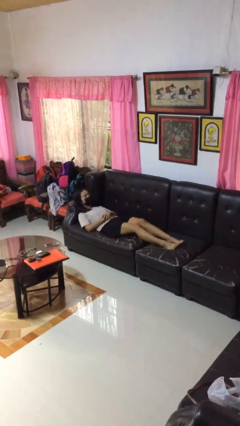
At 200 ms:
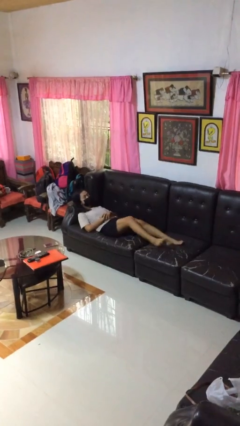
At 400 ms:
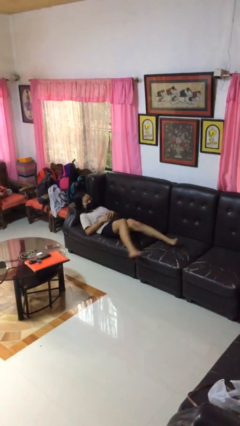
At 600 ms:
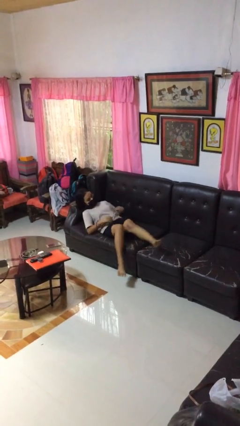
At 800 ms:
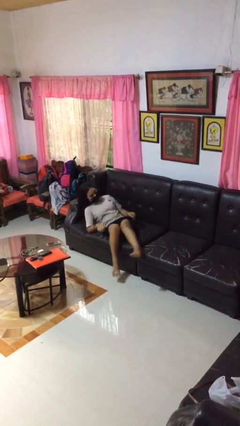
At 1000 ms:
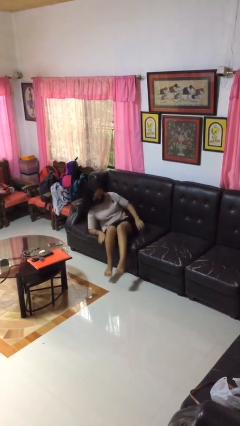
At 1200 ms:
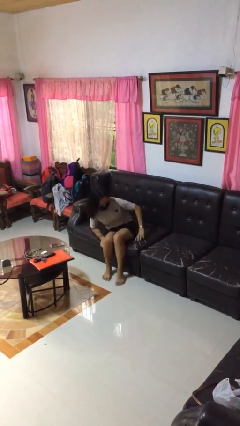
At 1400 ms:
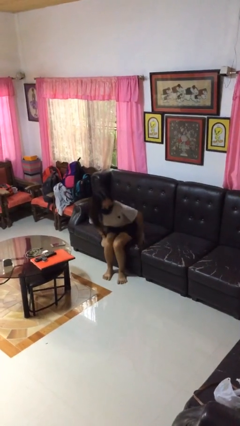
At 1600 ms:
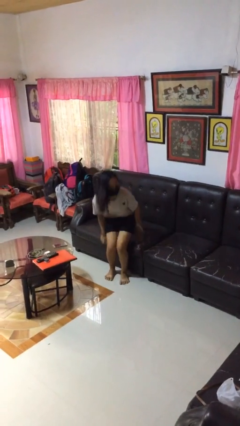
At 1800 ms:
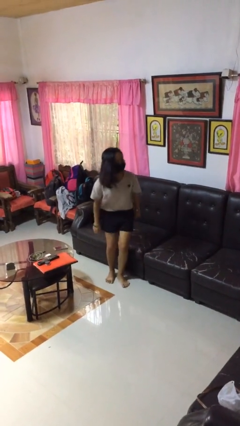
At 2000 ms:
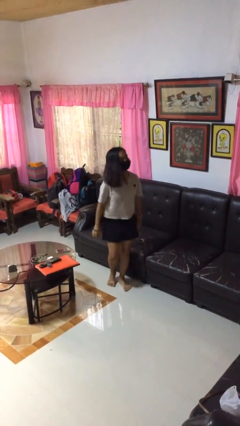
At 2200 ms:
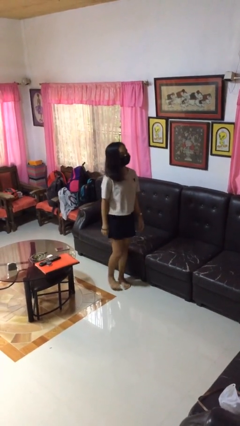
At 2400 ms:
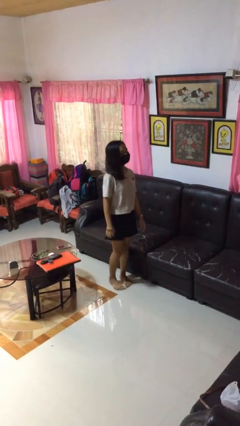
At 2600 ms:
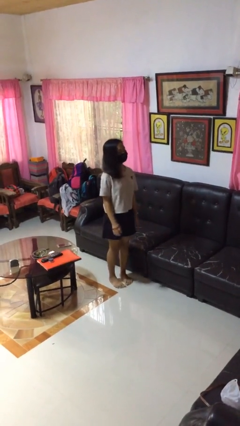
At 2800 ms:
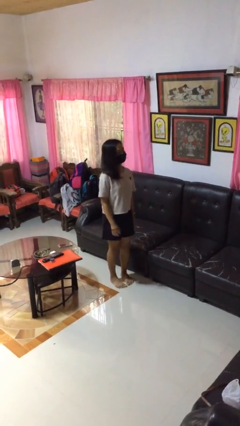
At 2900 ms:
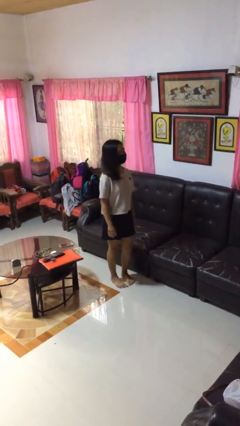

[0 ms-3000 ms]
person stands up

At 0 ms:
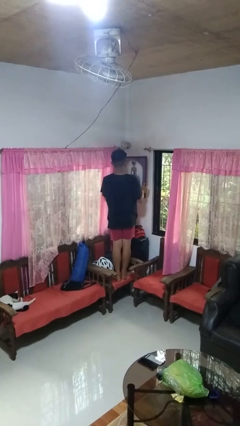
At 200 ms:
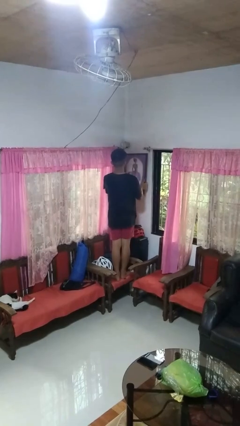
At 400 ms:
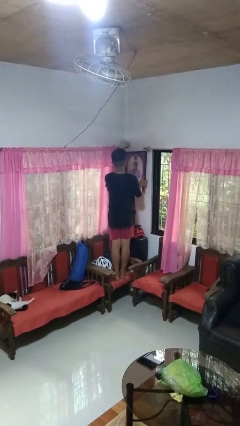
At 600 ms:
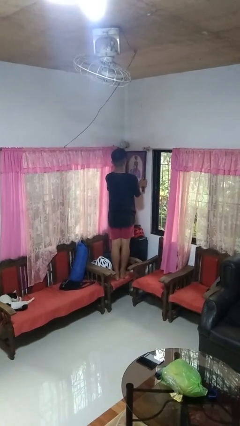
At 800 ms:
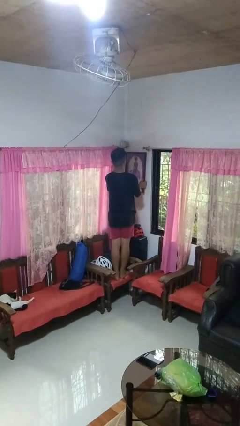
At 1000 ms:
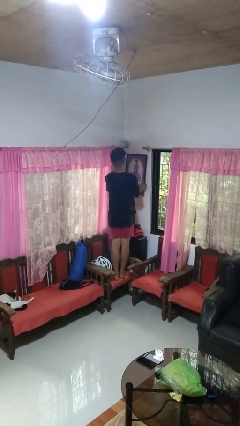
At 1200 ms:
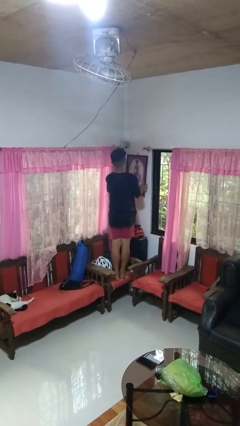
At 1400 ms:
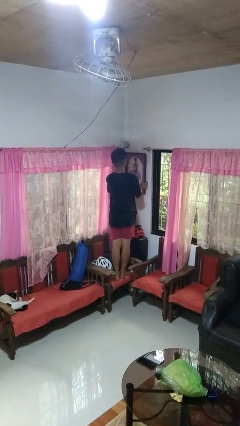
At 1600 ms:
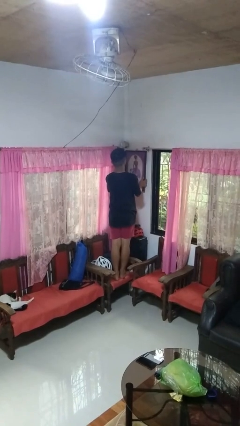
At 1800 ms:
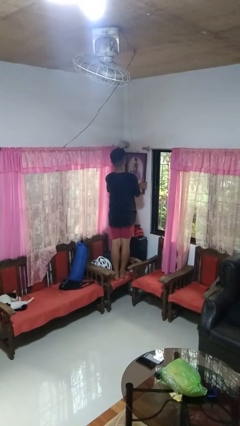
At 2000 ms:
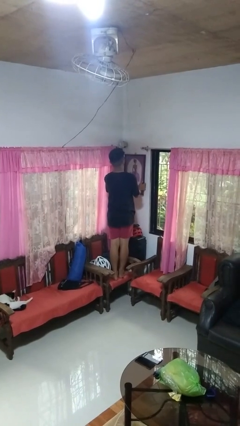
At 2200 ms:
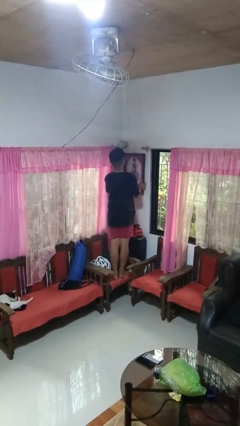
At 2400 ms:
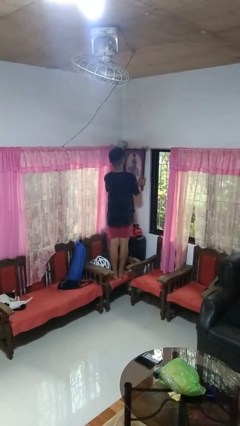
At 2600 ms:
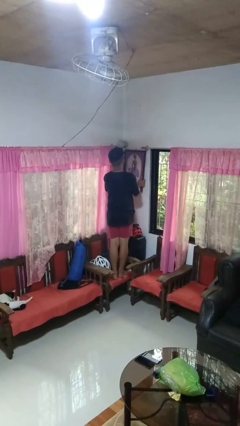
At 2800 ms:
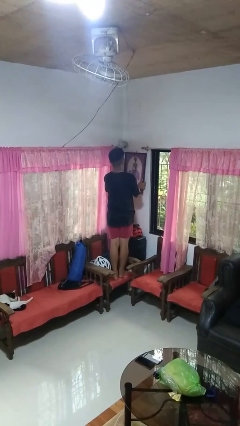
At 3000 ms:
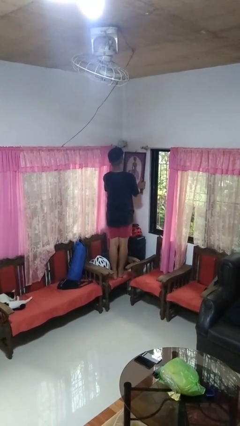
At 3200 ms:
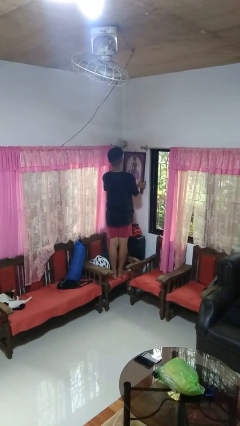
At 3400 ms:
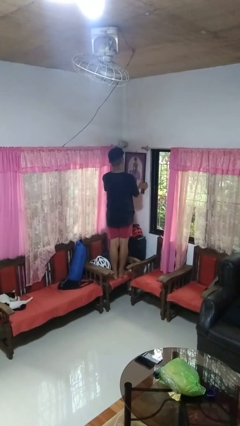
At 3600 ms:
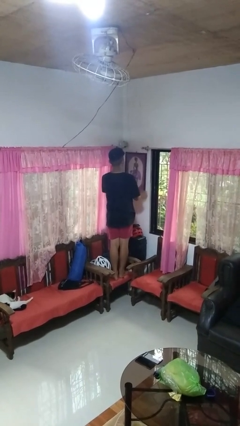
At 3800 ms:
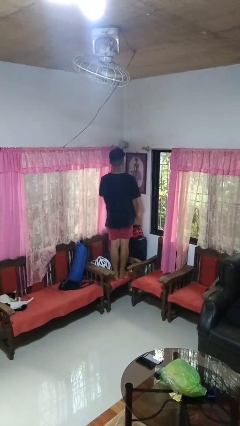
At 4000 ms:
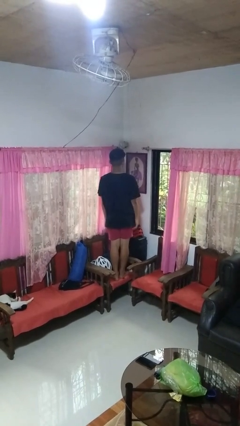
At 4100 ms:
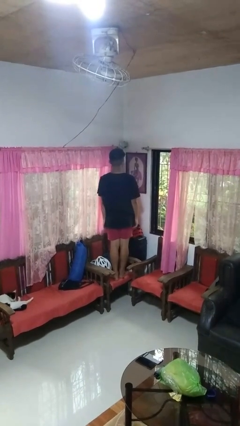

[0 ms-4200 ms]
person puts up picture frame

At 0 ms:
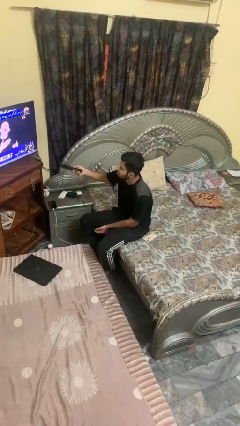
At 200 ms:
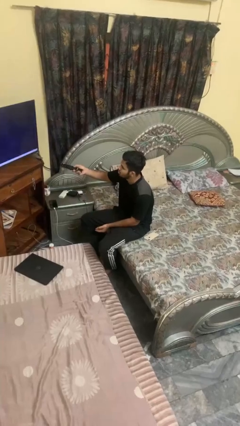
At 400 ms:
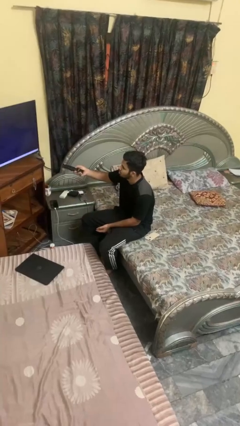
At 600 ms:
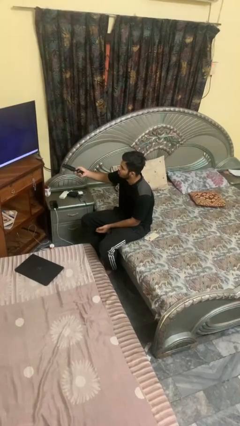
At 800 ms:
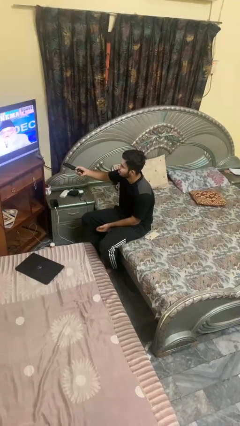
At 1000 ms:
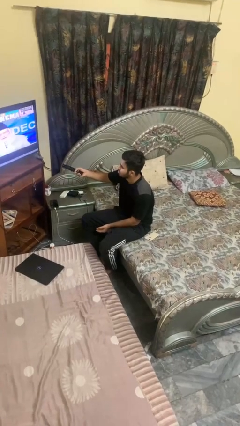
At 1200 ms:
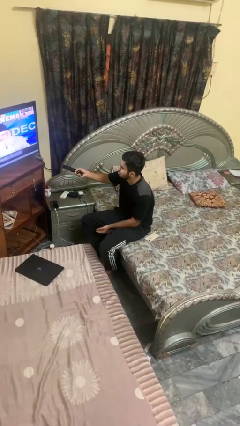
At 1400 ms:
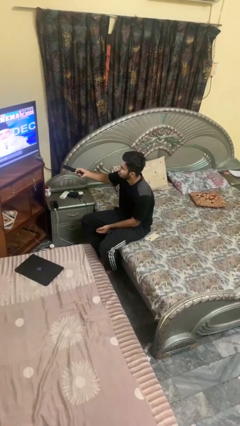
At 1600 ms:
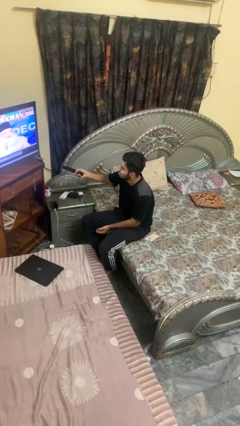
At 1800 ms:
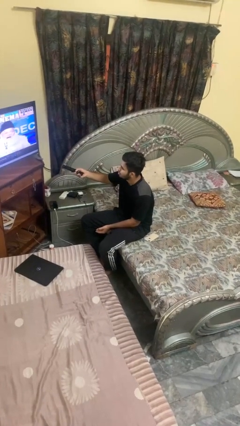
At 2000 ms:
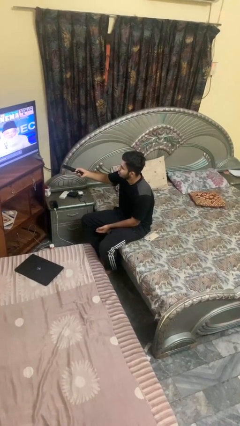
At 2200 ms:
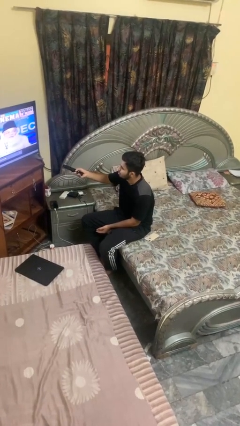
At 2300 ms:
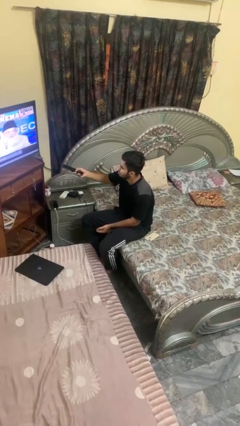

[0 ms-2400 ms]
person uses television remote

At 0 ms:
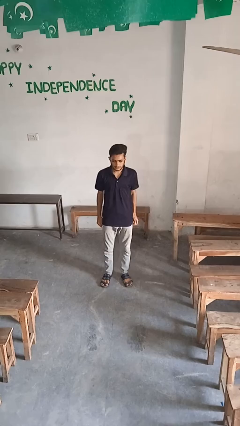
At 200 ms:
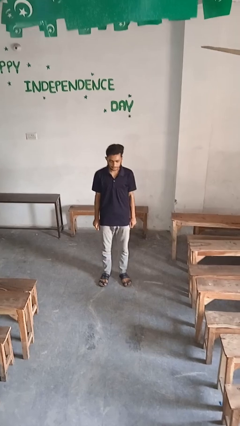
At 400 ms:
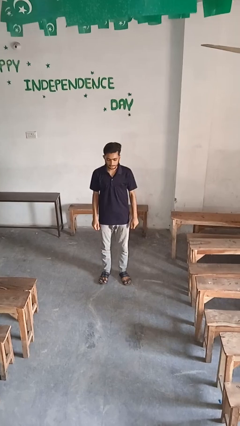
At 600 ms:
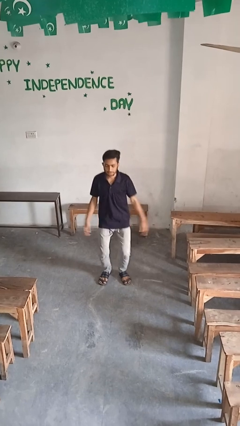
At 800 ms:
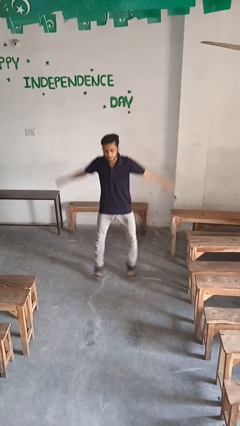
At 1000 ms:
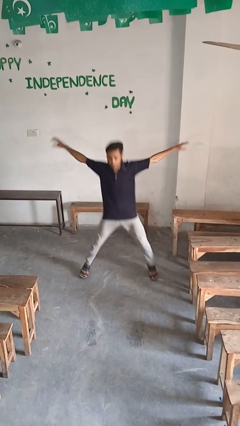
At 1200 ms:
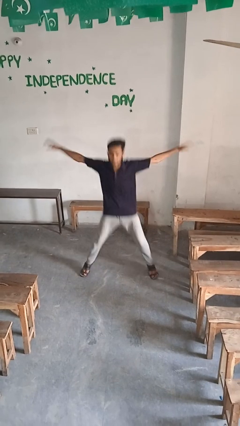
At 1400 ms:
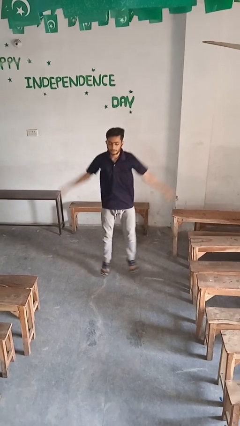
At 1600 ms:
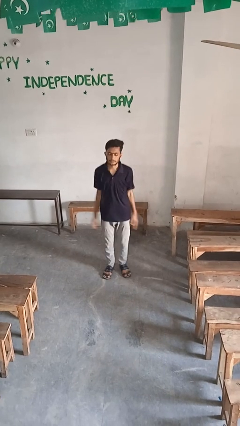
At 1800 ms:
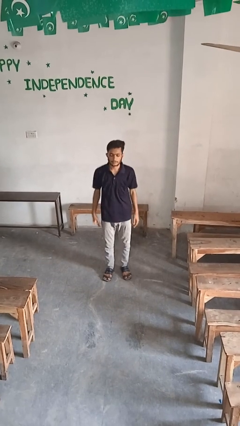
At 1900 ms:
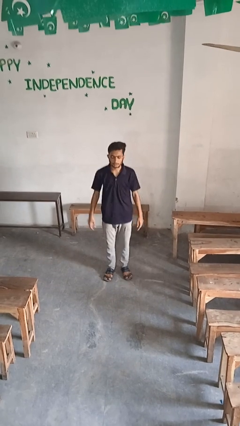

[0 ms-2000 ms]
person exercises with jumping jacks

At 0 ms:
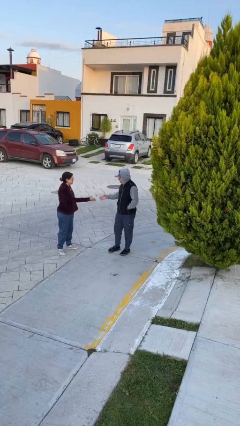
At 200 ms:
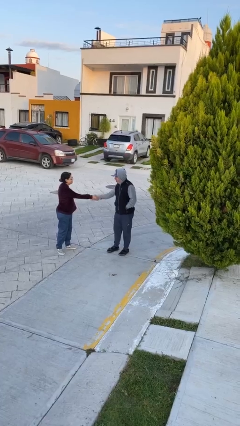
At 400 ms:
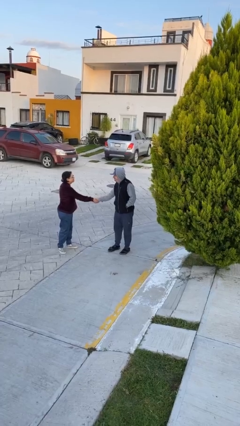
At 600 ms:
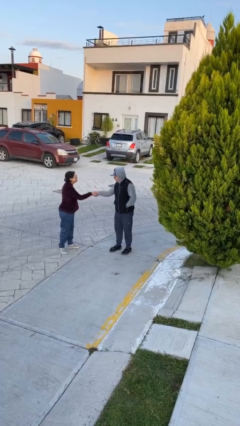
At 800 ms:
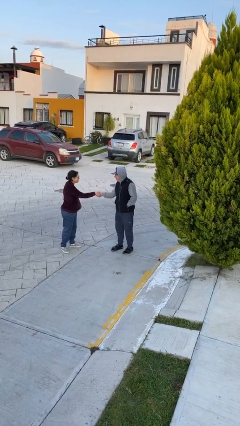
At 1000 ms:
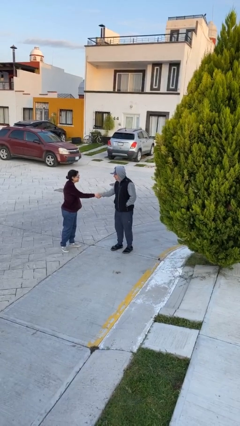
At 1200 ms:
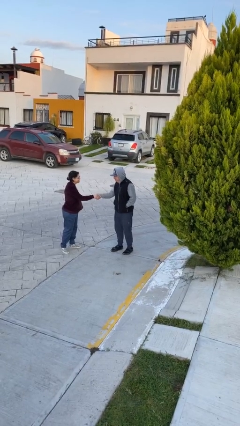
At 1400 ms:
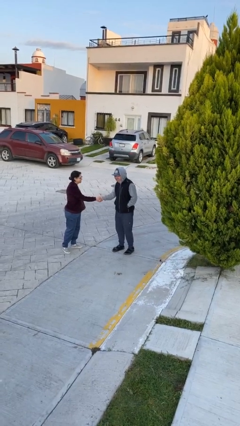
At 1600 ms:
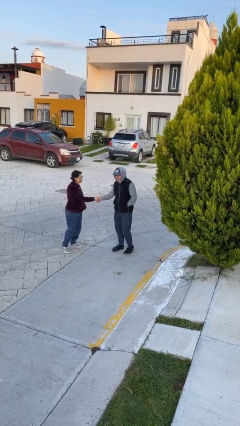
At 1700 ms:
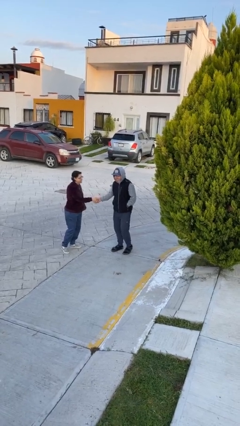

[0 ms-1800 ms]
person shakes hand

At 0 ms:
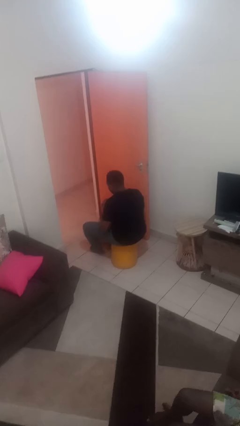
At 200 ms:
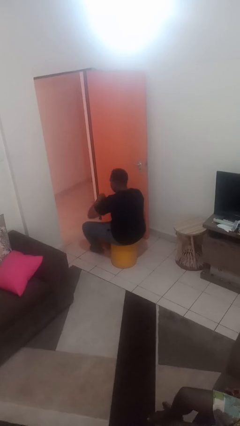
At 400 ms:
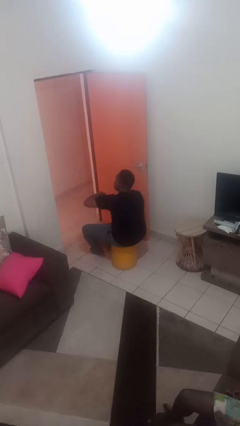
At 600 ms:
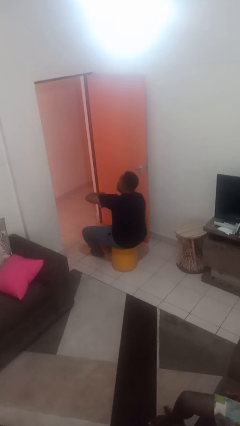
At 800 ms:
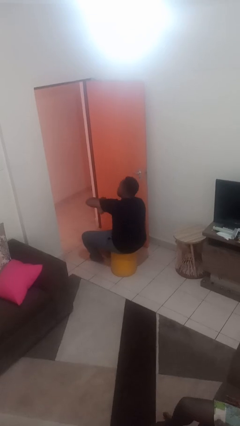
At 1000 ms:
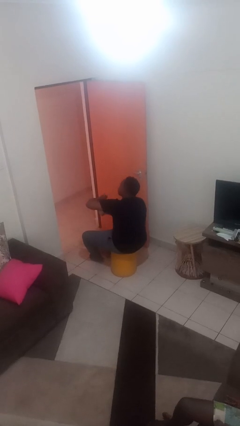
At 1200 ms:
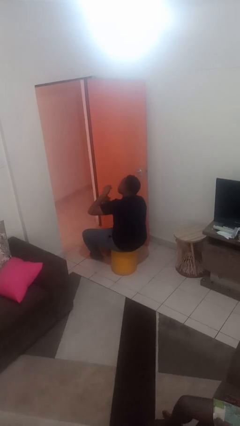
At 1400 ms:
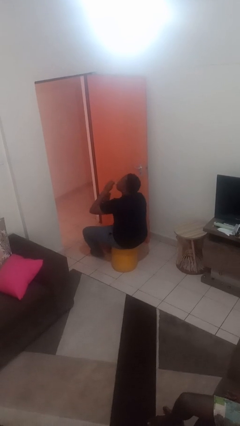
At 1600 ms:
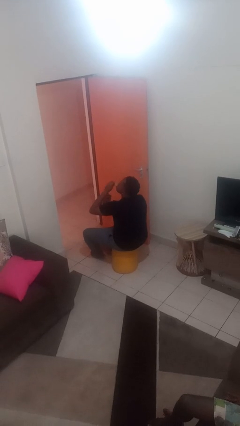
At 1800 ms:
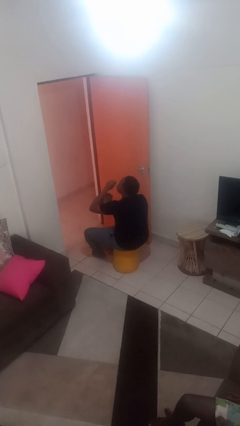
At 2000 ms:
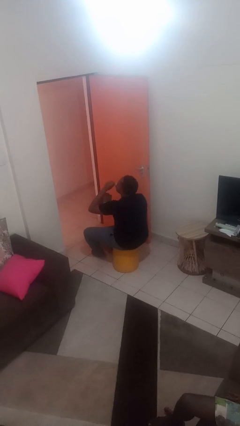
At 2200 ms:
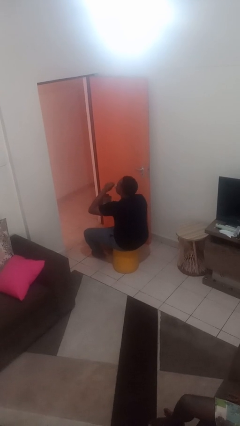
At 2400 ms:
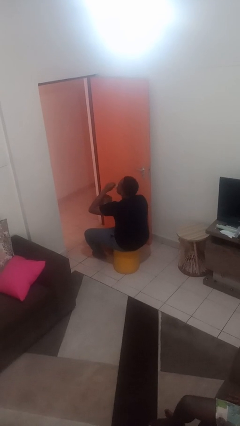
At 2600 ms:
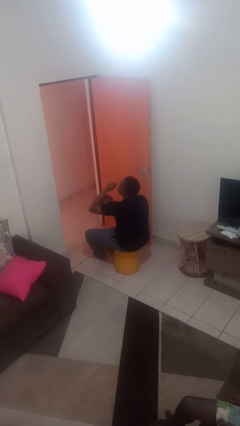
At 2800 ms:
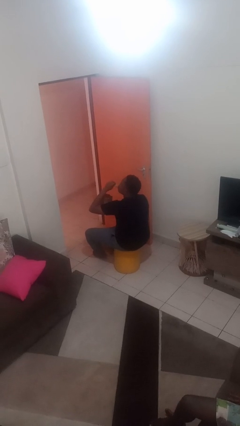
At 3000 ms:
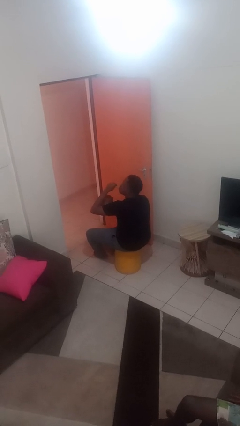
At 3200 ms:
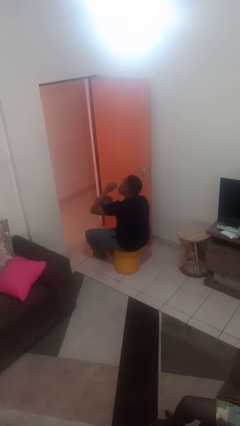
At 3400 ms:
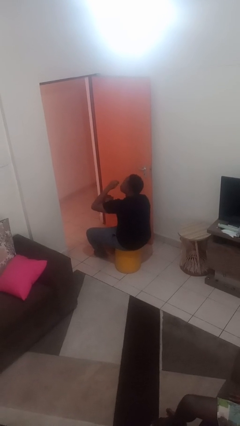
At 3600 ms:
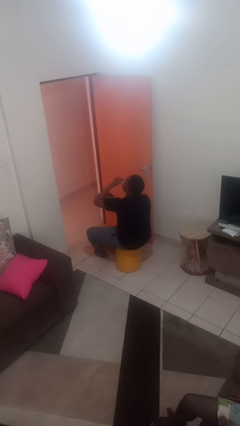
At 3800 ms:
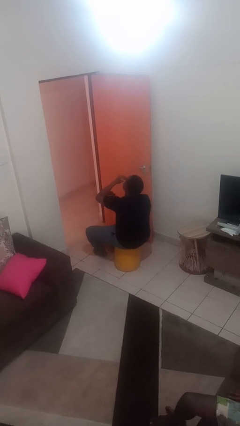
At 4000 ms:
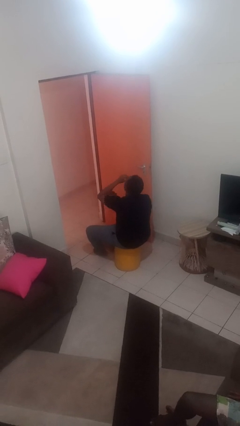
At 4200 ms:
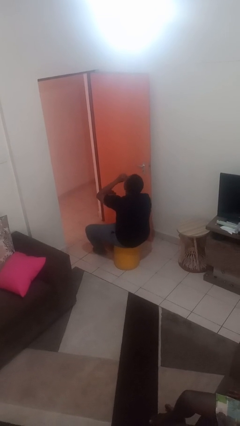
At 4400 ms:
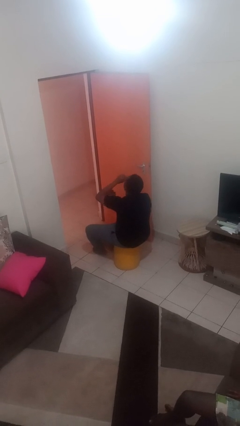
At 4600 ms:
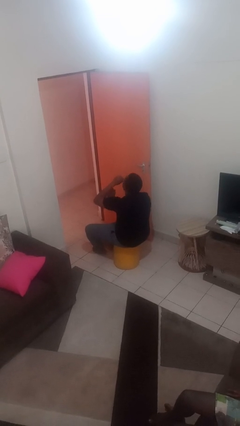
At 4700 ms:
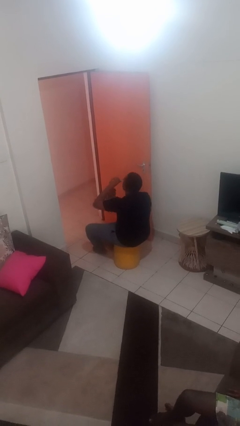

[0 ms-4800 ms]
person eats snack from bag
